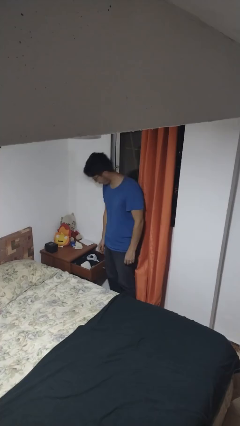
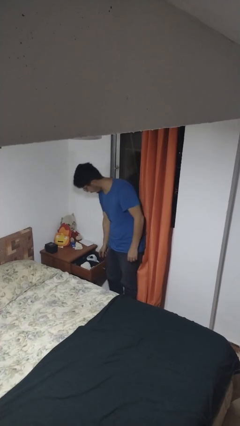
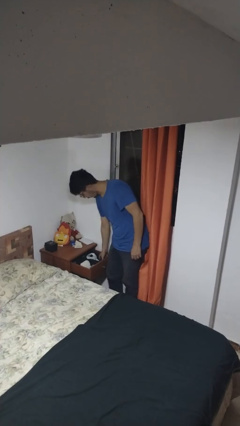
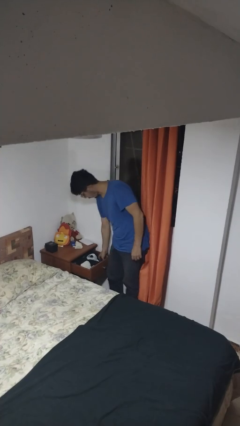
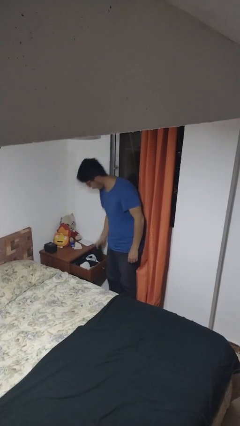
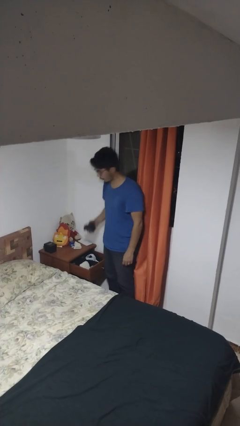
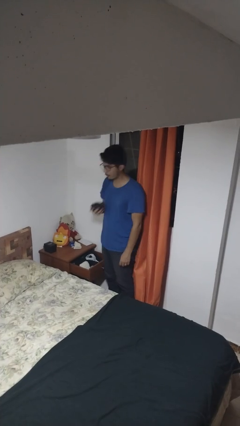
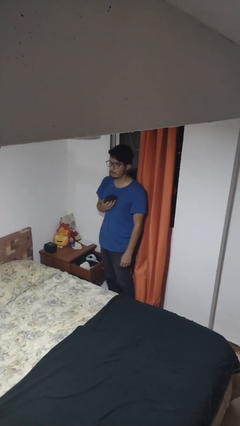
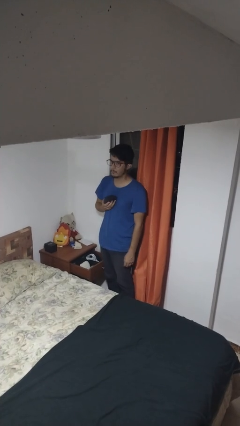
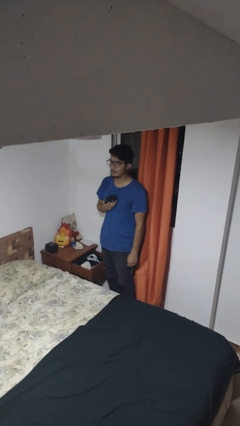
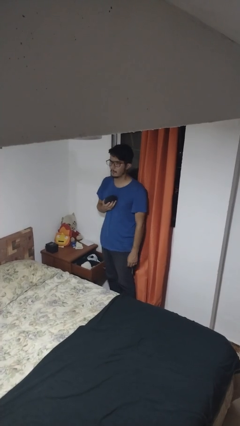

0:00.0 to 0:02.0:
person takes clothes from dresser

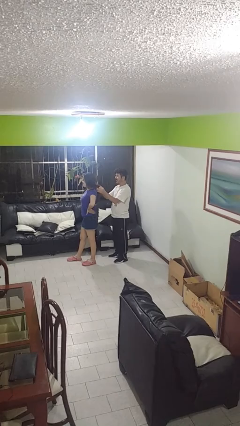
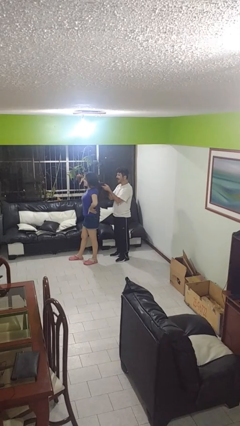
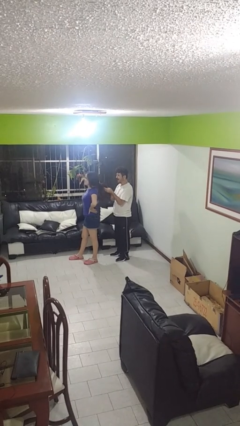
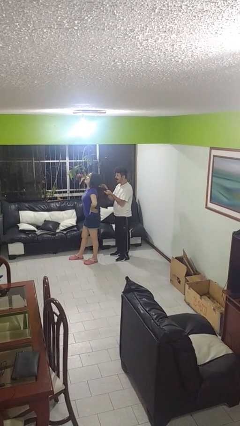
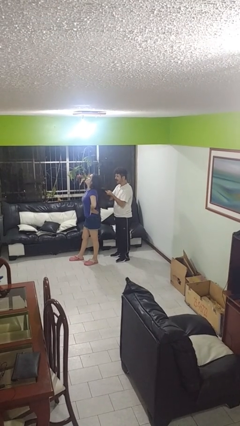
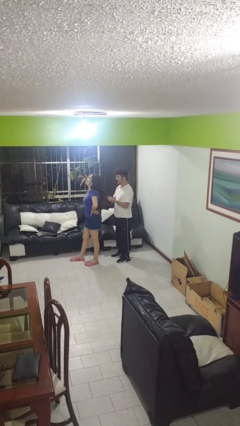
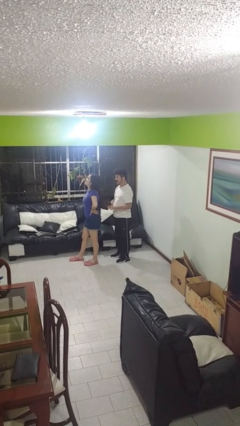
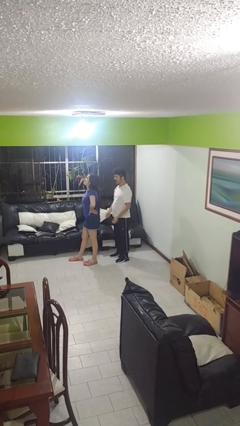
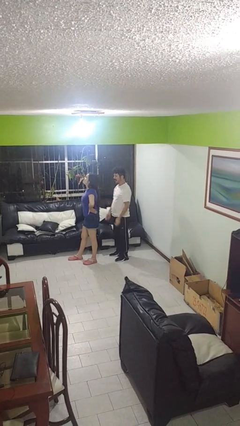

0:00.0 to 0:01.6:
person grabs person by hair

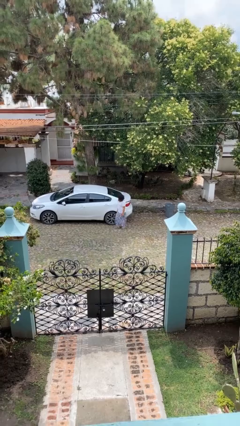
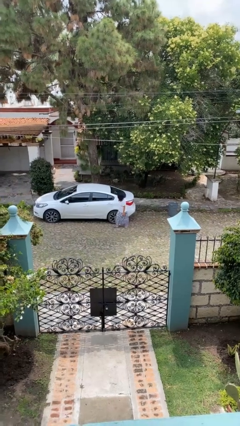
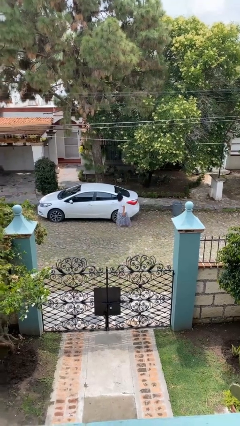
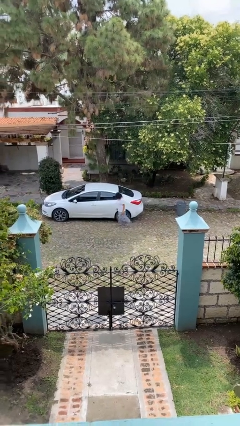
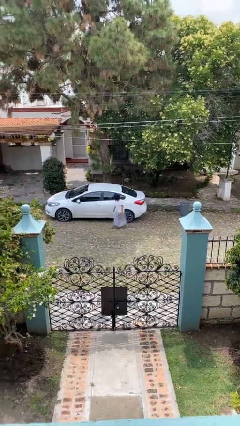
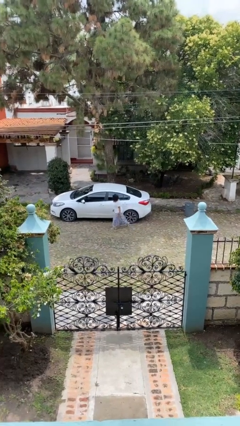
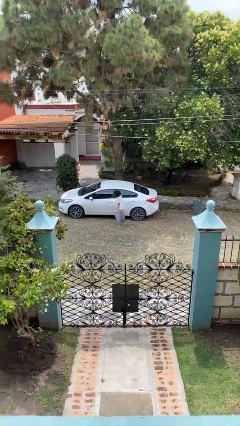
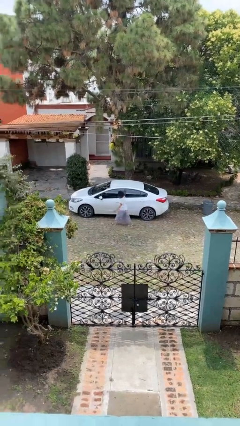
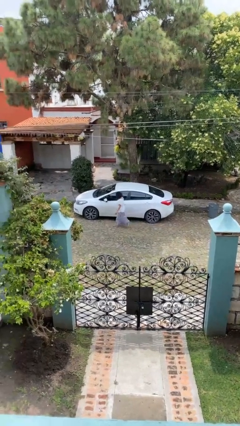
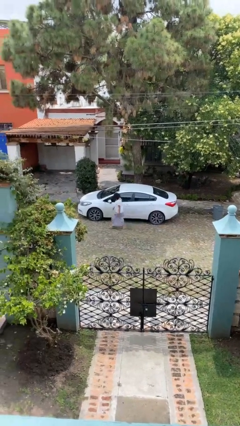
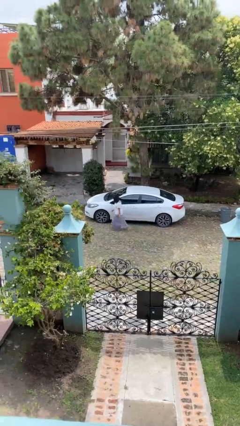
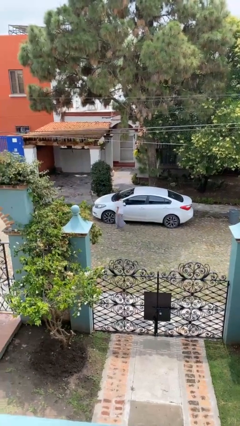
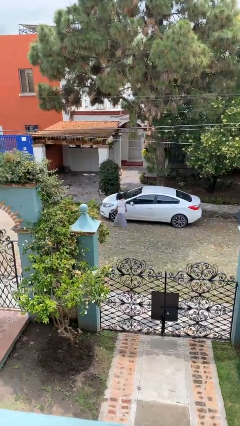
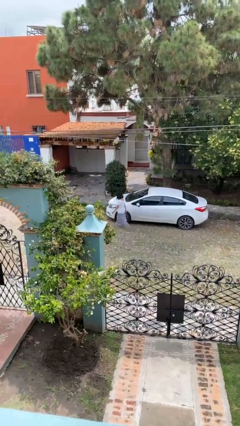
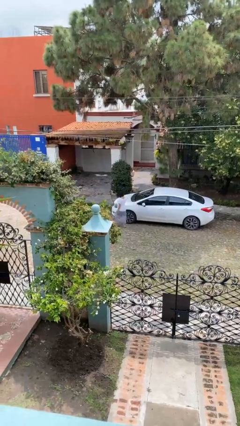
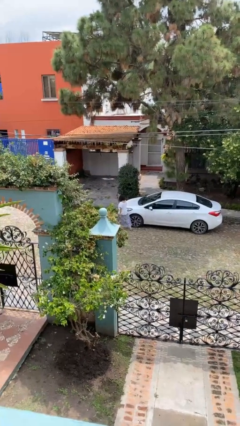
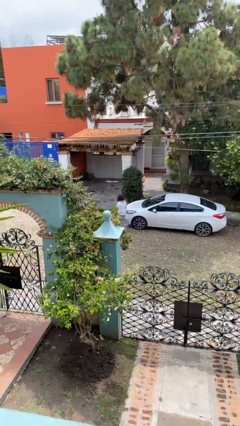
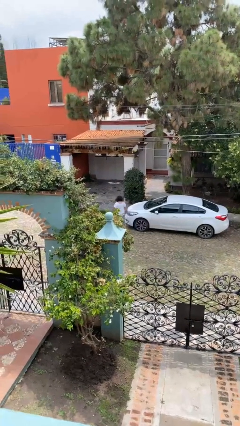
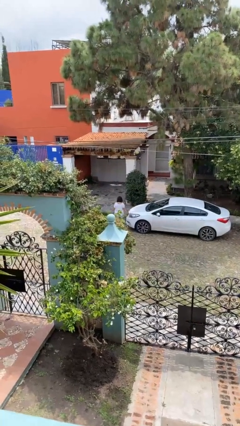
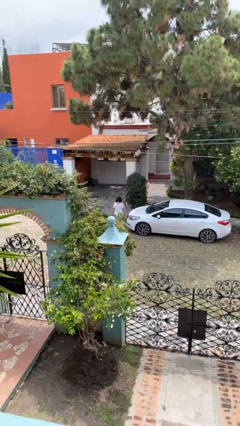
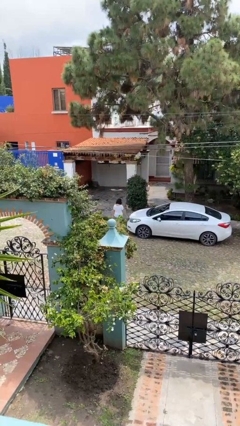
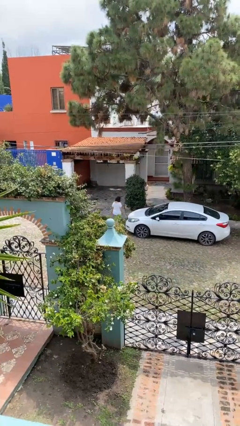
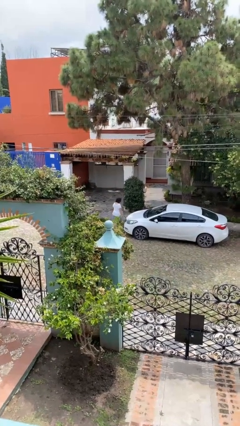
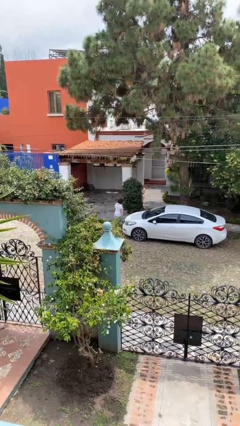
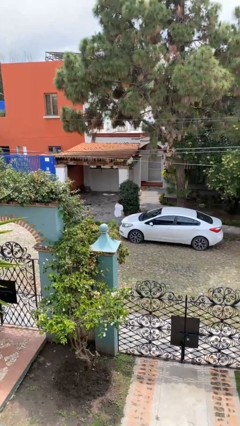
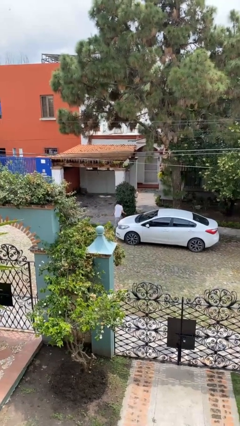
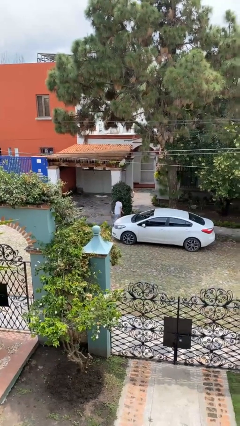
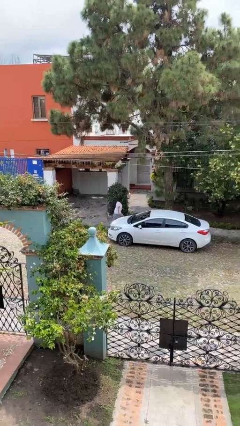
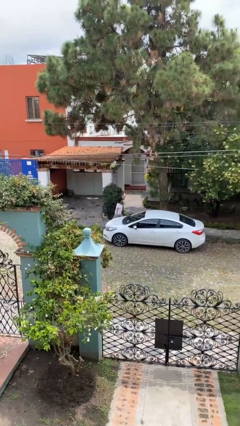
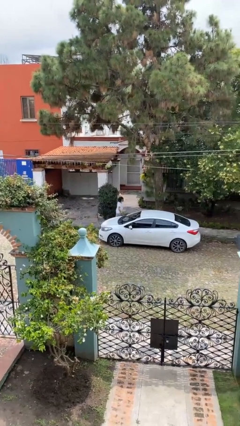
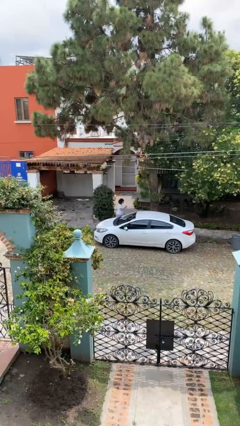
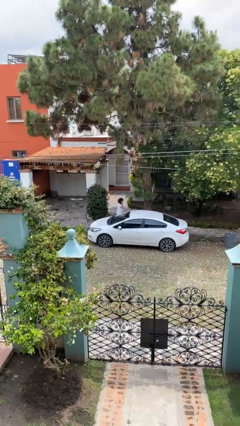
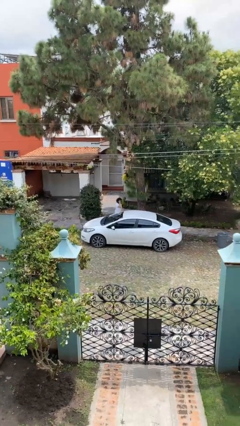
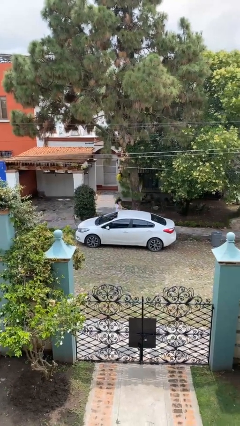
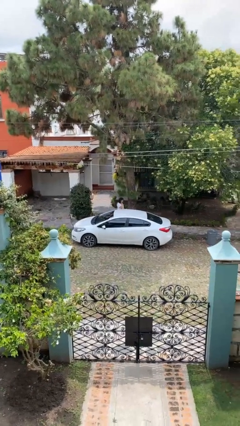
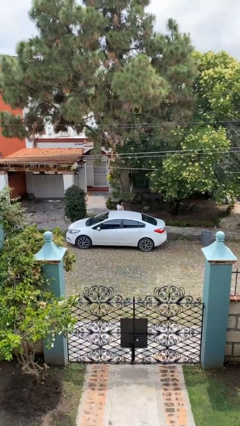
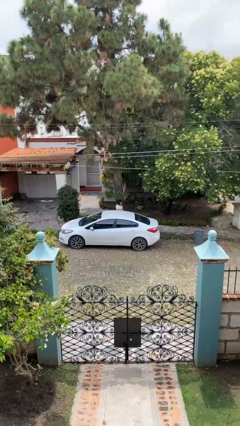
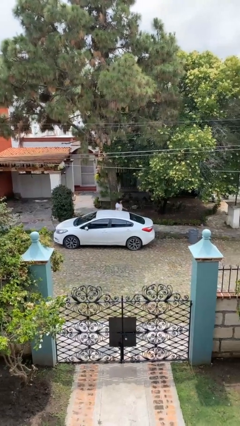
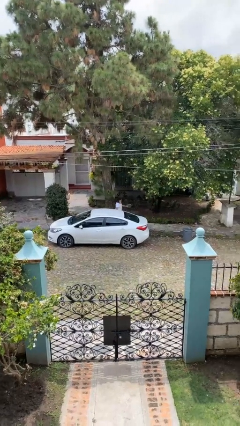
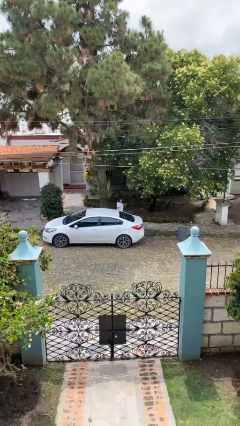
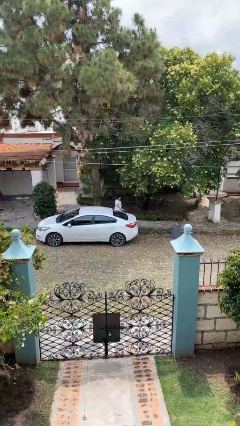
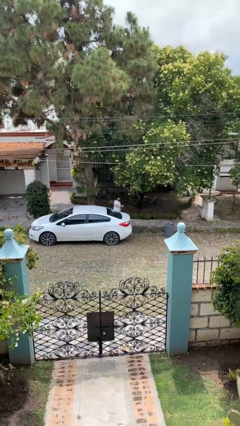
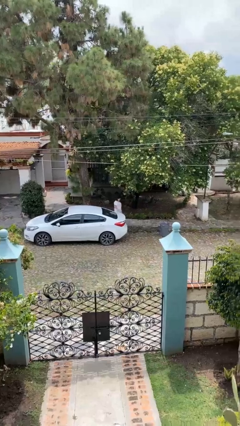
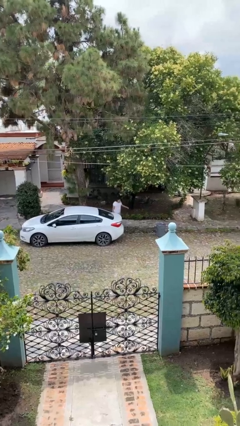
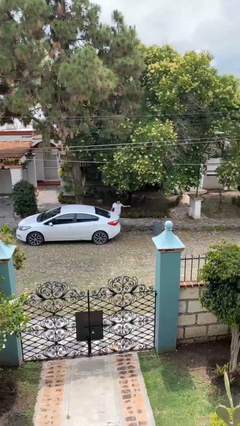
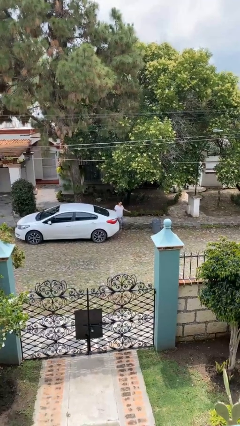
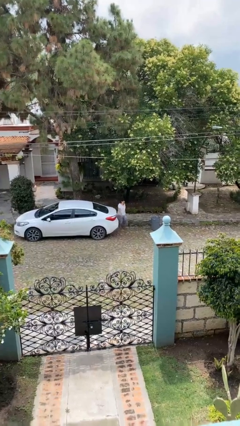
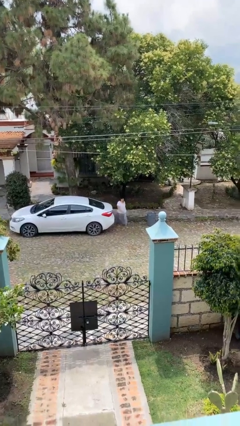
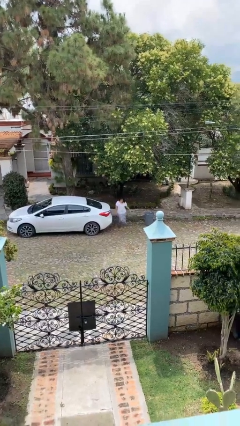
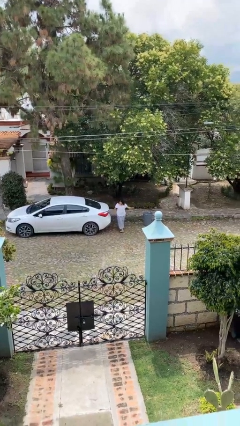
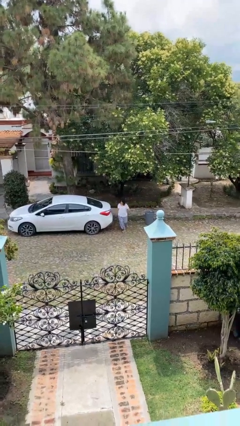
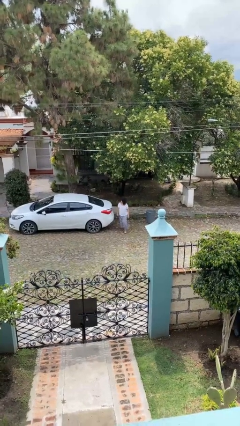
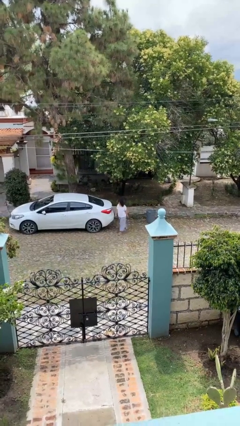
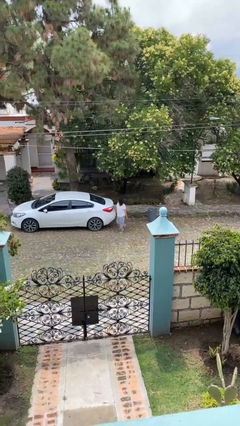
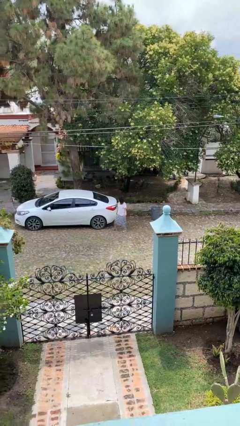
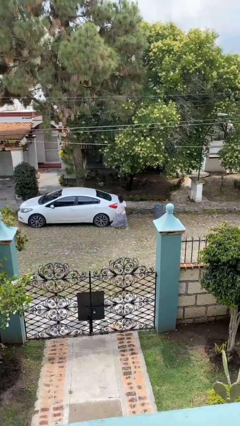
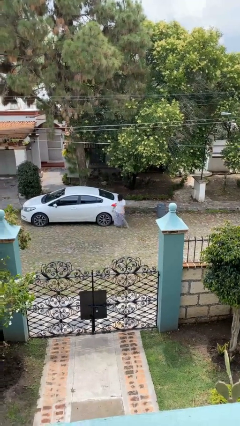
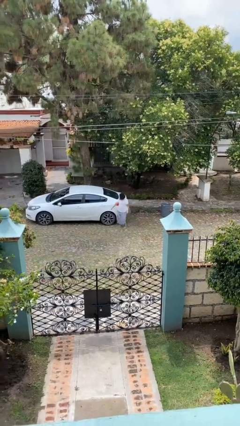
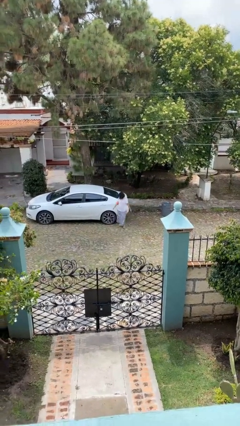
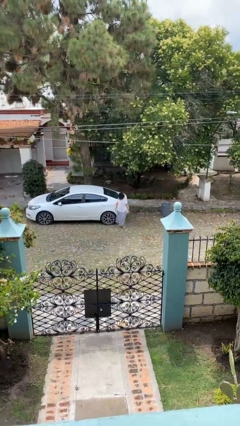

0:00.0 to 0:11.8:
person walks around car

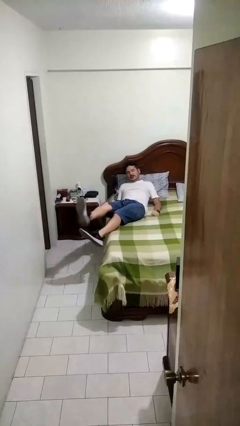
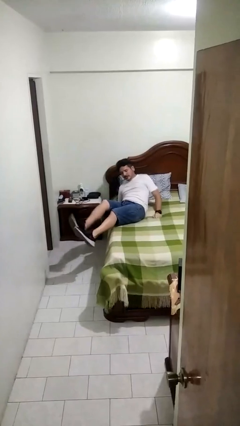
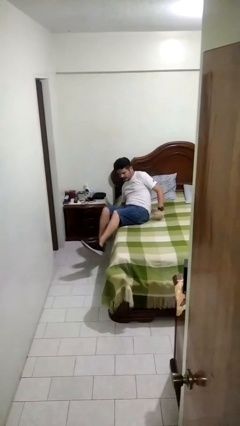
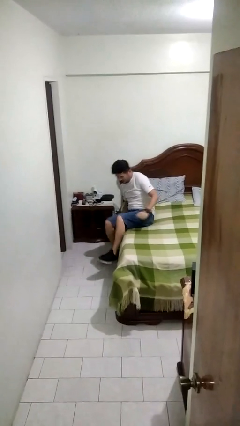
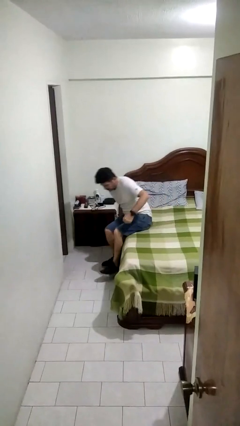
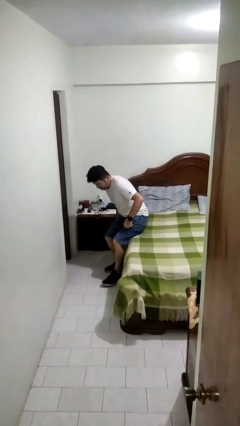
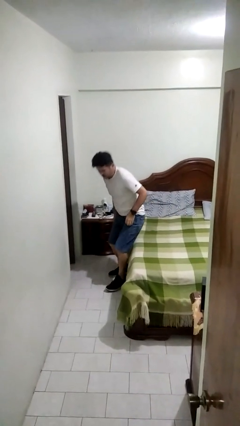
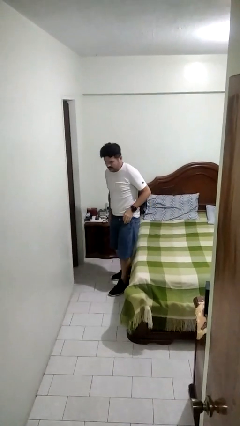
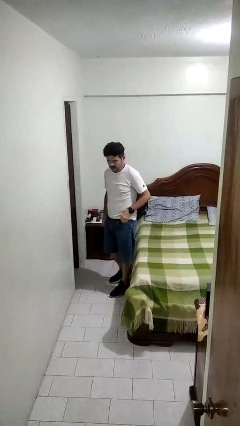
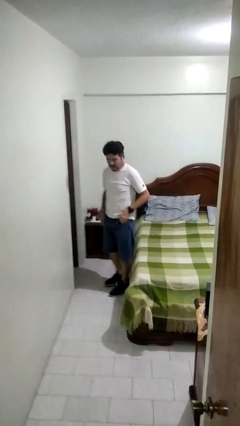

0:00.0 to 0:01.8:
person stands up

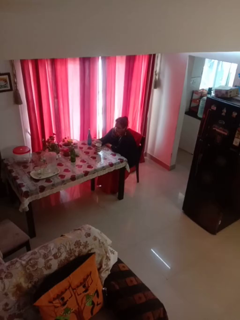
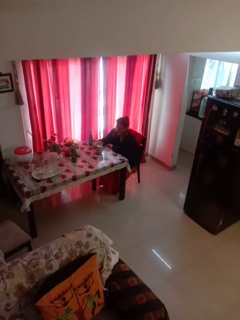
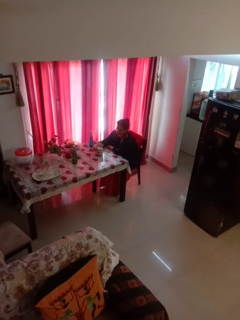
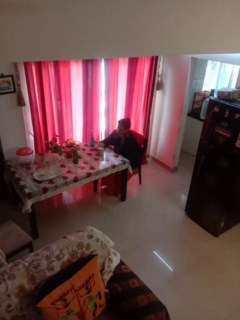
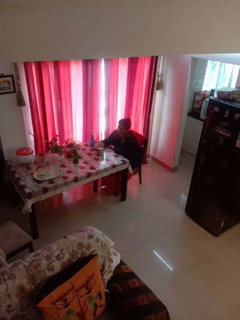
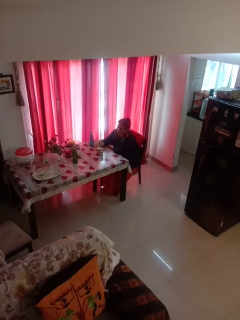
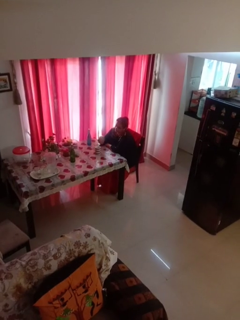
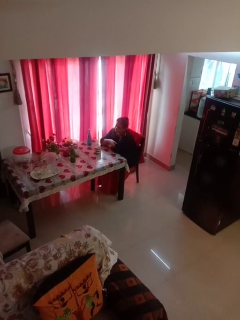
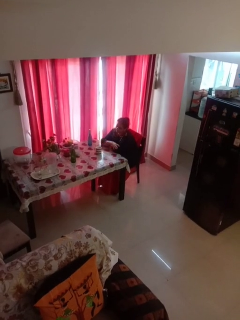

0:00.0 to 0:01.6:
person puts down object on table
